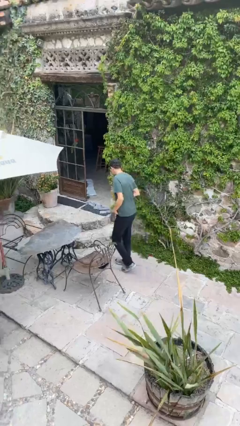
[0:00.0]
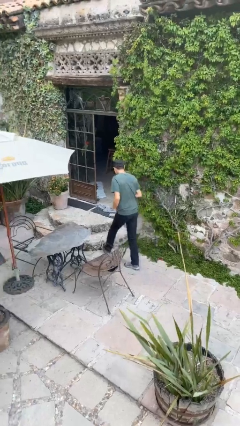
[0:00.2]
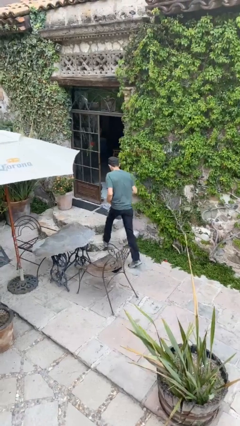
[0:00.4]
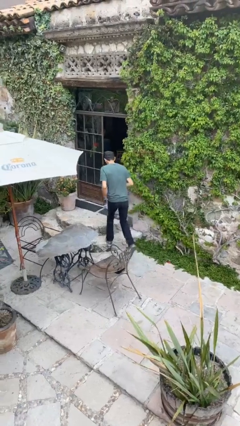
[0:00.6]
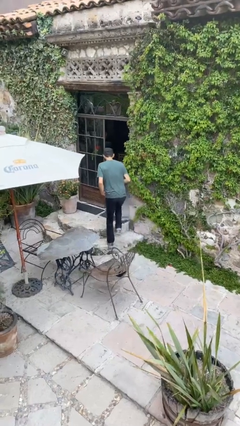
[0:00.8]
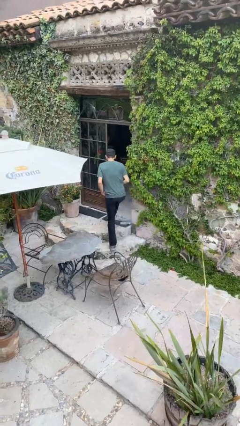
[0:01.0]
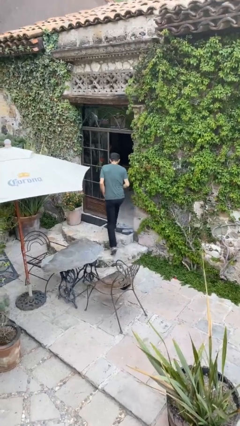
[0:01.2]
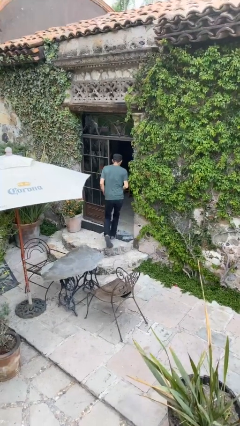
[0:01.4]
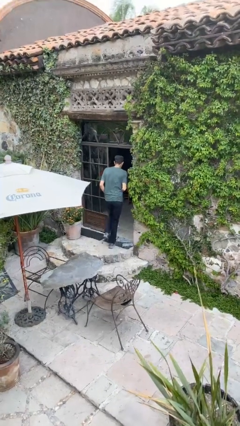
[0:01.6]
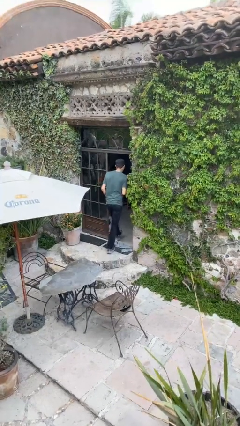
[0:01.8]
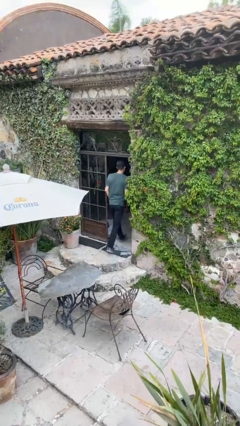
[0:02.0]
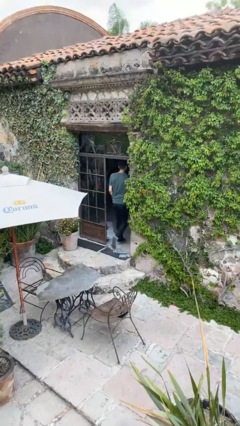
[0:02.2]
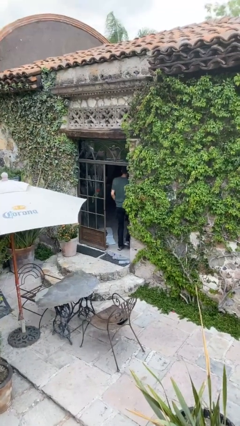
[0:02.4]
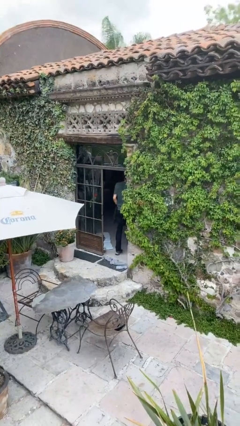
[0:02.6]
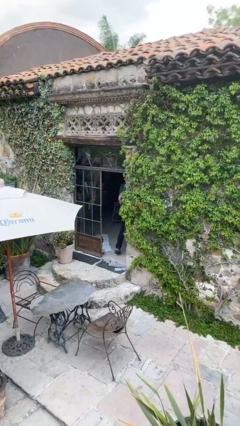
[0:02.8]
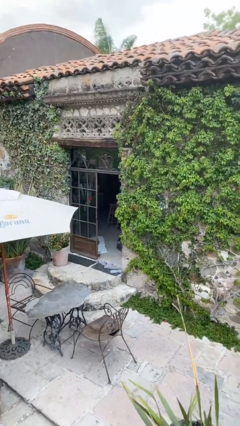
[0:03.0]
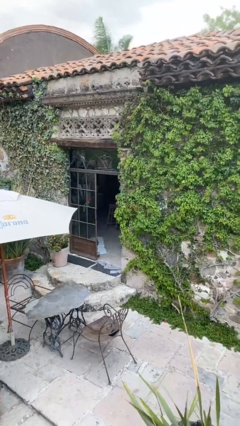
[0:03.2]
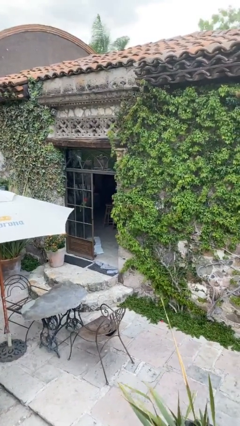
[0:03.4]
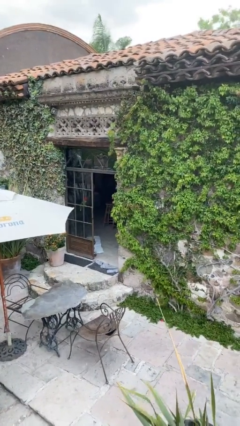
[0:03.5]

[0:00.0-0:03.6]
person exits scene through structure

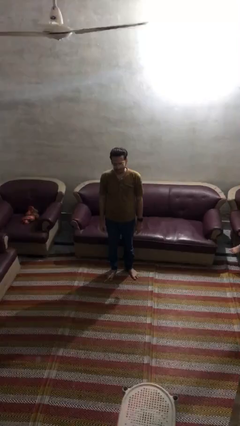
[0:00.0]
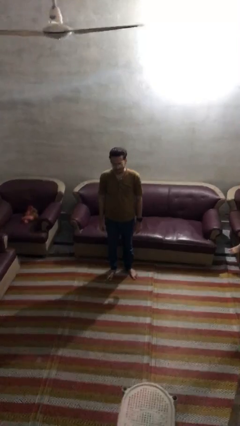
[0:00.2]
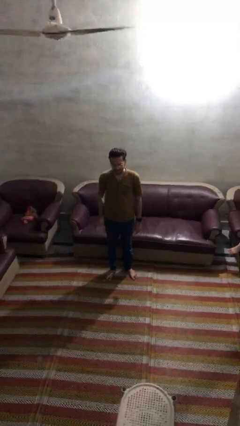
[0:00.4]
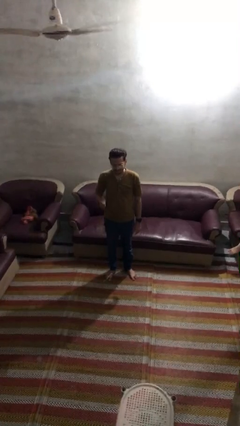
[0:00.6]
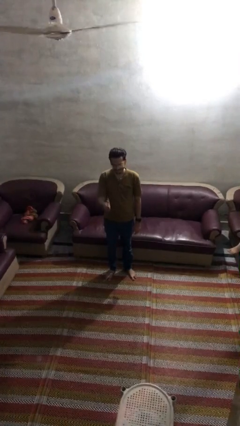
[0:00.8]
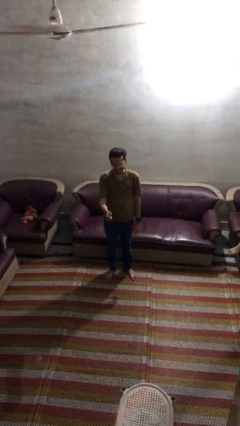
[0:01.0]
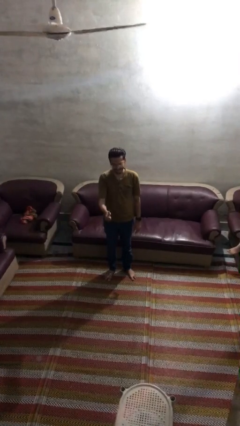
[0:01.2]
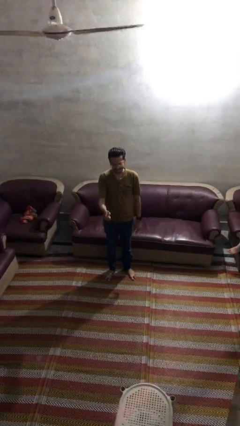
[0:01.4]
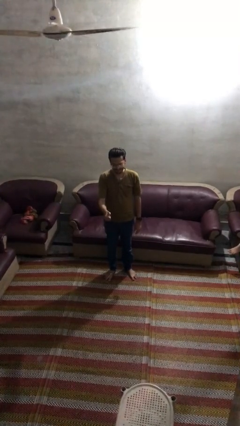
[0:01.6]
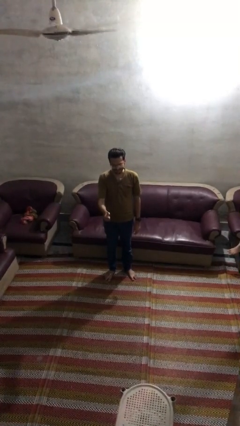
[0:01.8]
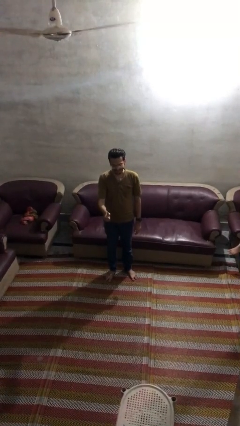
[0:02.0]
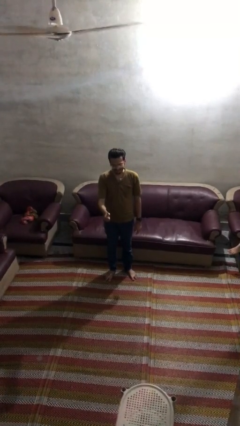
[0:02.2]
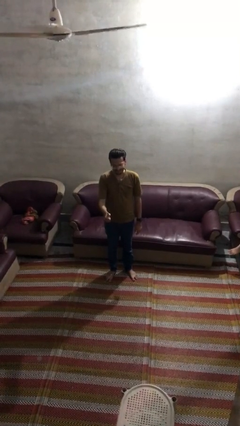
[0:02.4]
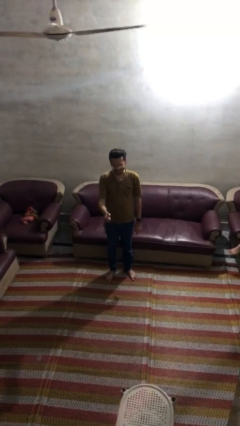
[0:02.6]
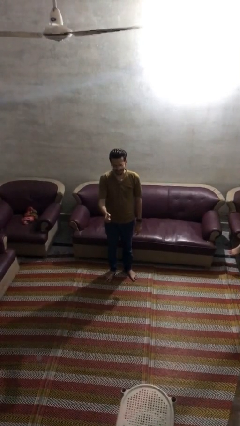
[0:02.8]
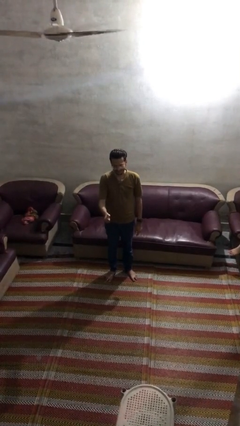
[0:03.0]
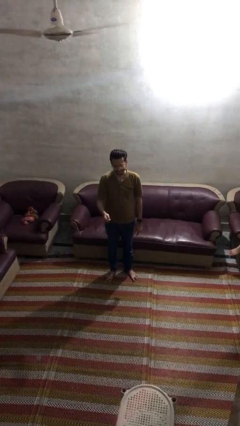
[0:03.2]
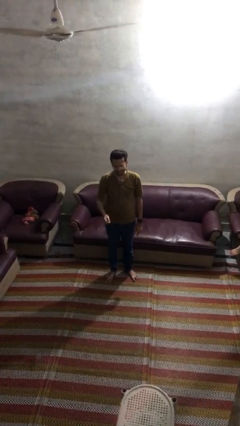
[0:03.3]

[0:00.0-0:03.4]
person gestures thumbs up

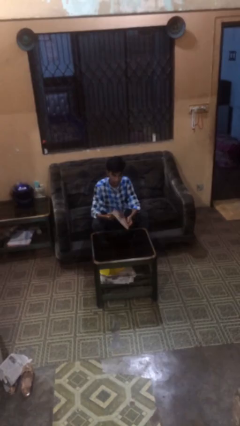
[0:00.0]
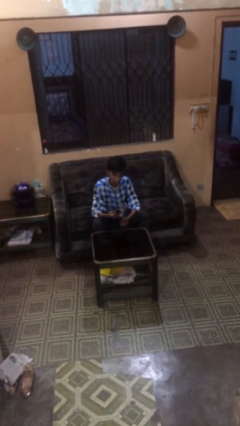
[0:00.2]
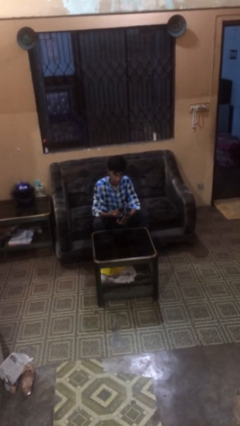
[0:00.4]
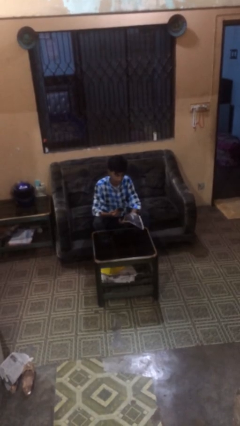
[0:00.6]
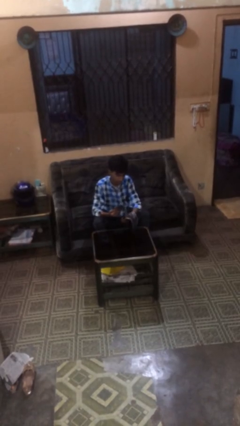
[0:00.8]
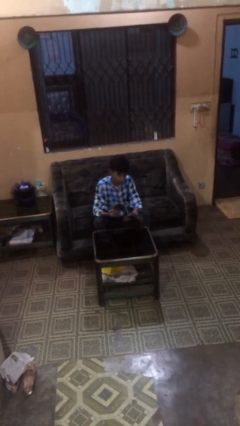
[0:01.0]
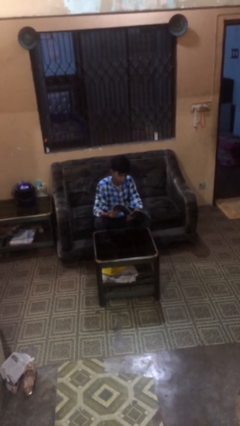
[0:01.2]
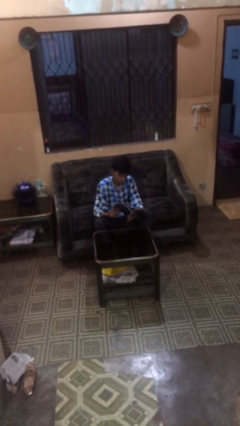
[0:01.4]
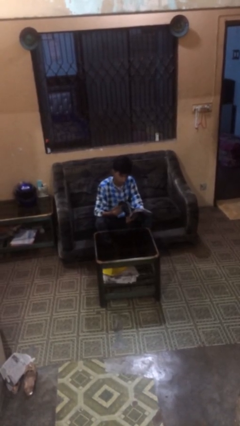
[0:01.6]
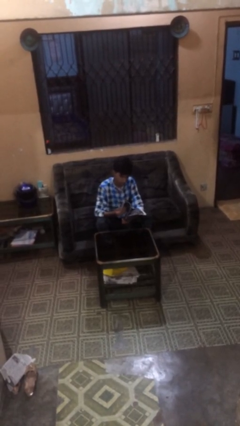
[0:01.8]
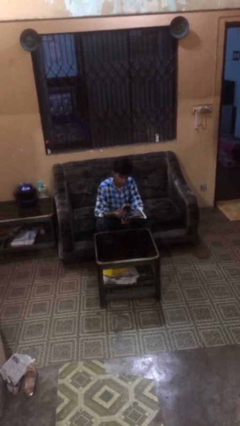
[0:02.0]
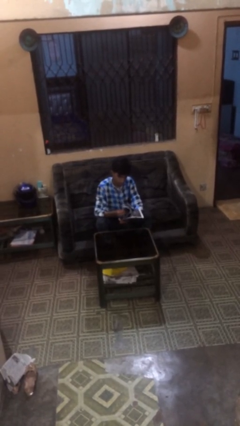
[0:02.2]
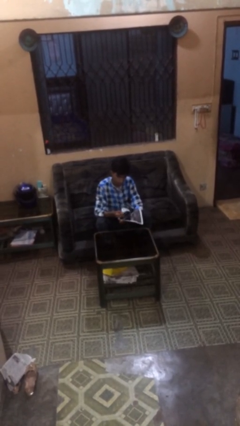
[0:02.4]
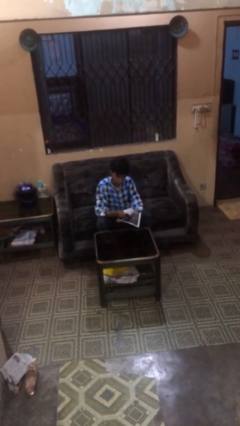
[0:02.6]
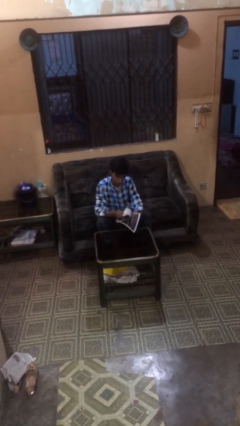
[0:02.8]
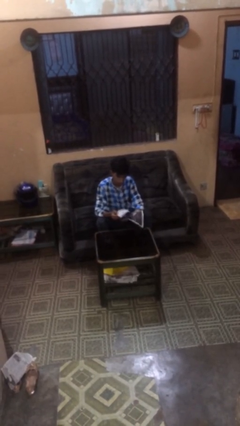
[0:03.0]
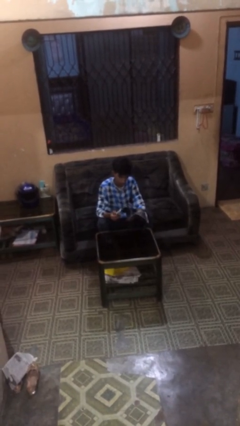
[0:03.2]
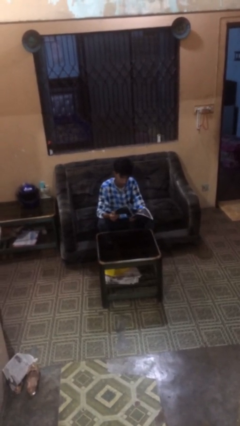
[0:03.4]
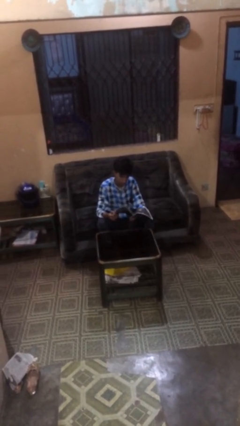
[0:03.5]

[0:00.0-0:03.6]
person reads document

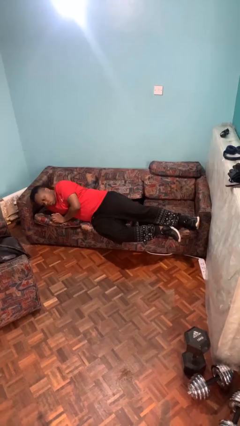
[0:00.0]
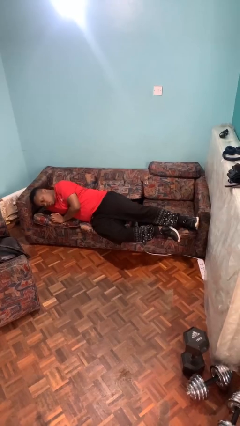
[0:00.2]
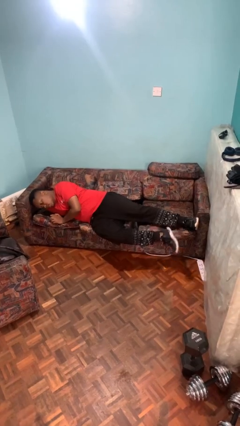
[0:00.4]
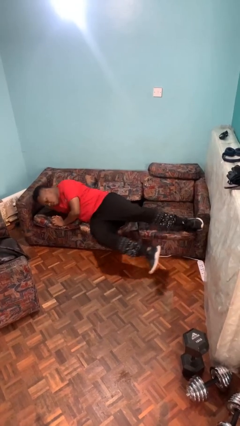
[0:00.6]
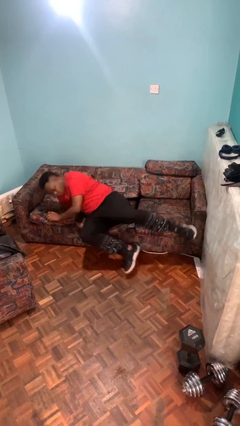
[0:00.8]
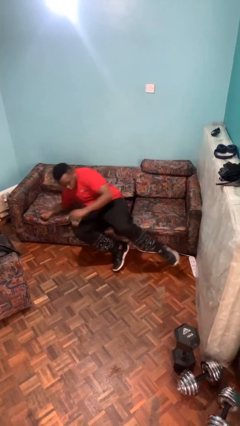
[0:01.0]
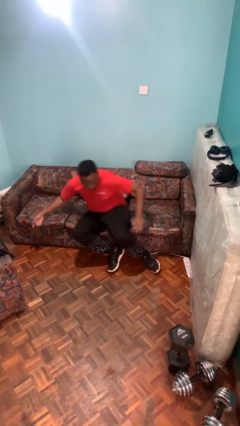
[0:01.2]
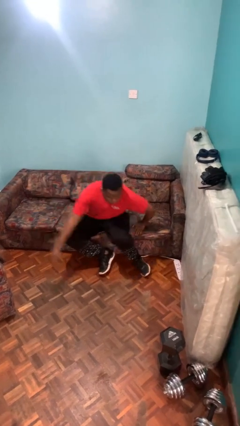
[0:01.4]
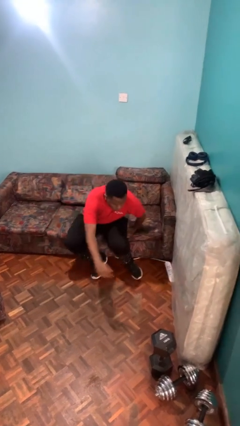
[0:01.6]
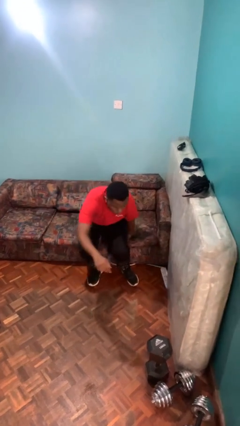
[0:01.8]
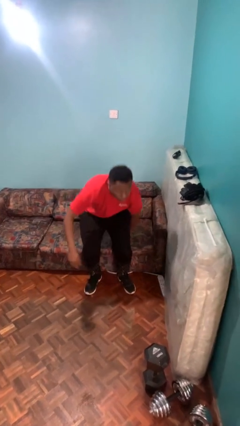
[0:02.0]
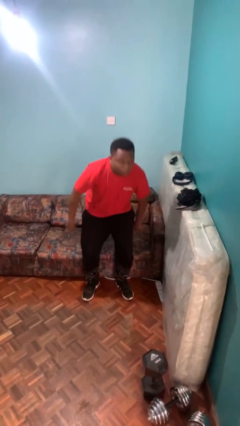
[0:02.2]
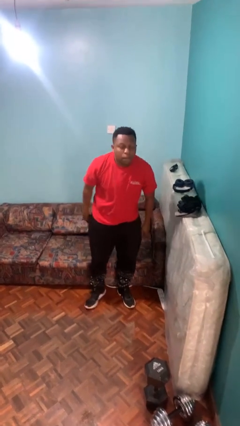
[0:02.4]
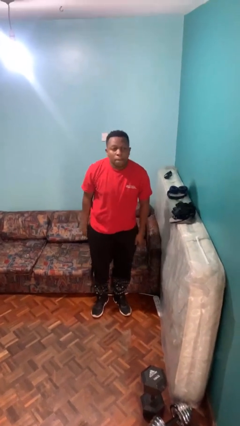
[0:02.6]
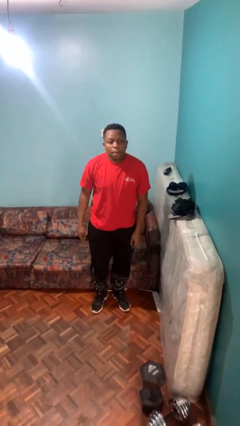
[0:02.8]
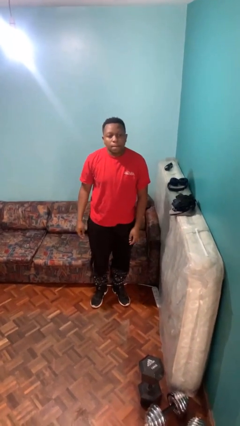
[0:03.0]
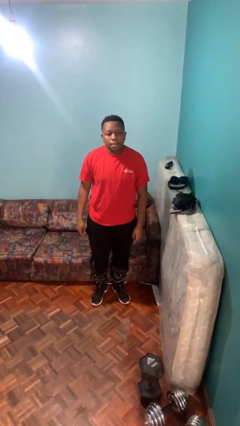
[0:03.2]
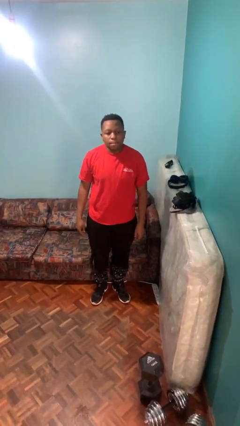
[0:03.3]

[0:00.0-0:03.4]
person stands up

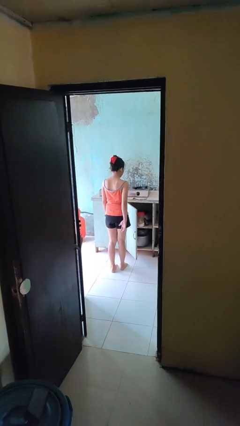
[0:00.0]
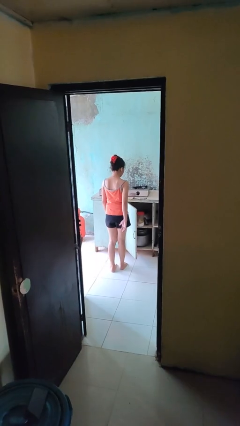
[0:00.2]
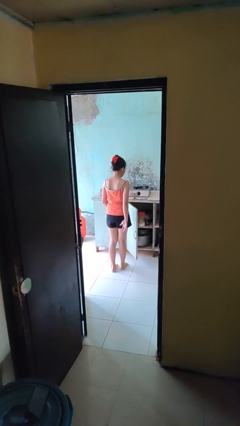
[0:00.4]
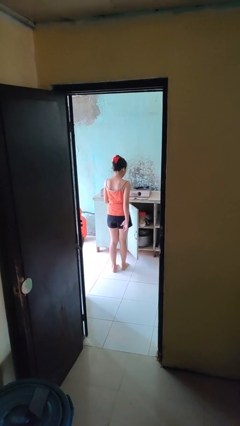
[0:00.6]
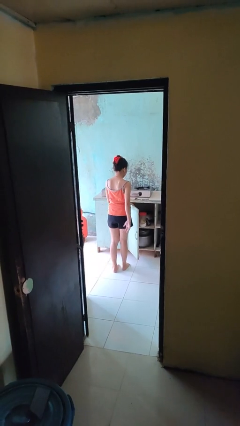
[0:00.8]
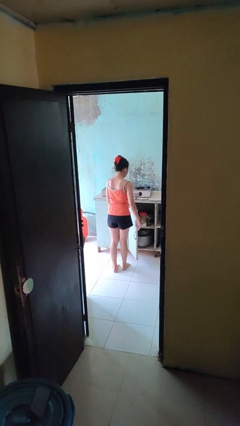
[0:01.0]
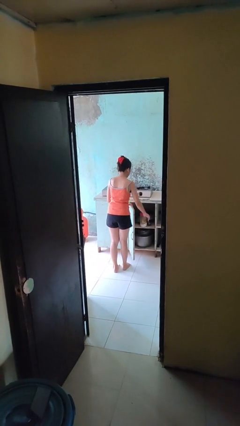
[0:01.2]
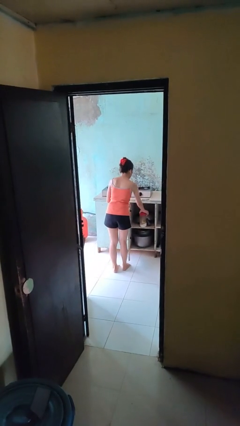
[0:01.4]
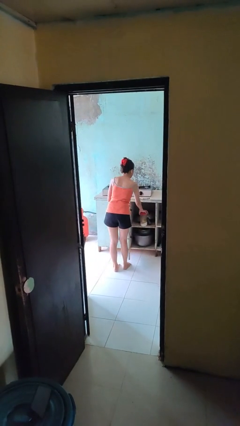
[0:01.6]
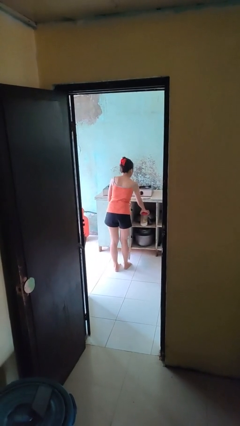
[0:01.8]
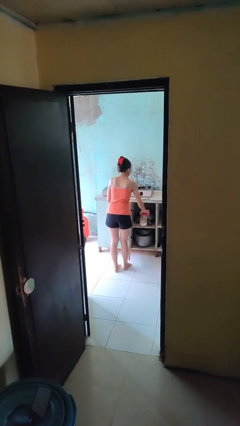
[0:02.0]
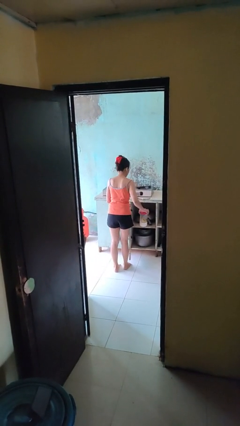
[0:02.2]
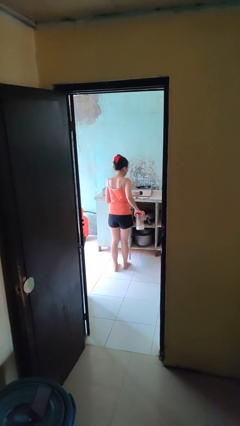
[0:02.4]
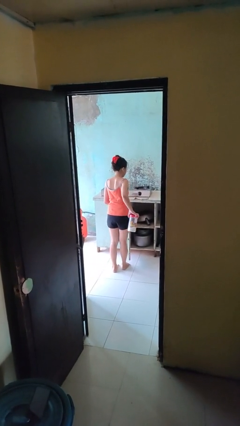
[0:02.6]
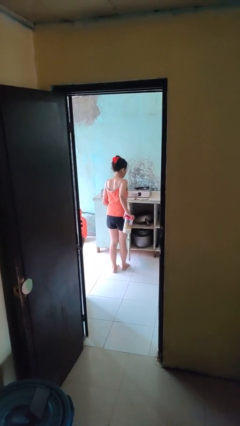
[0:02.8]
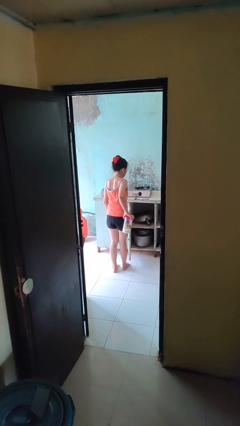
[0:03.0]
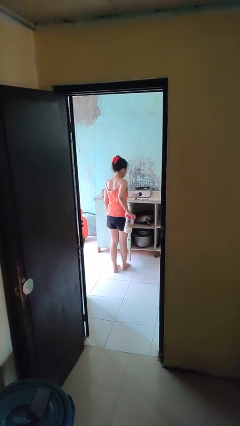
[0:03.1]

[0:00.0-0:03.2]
person picks up object from cabinet

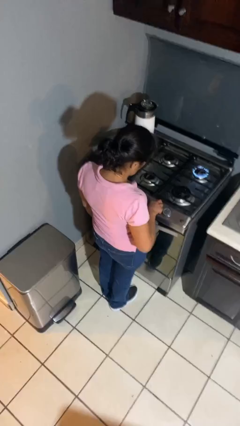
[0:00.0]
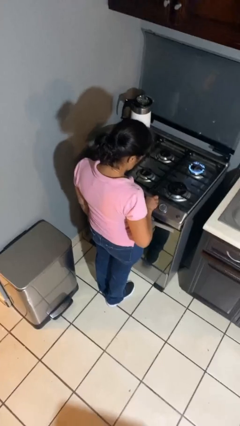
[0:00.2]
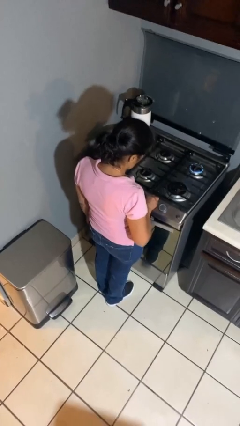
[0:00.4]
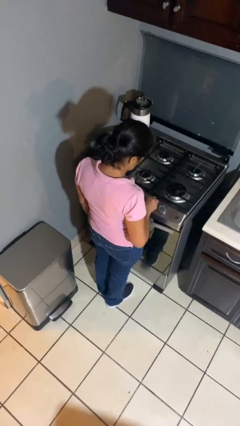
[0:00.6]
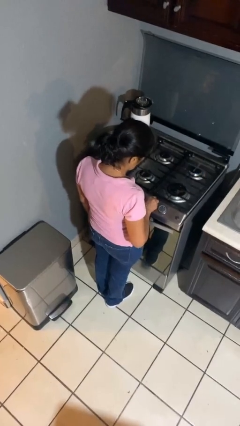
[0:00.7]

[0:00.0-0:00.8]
person turns off stovetop
